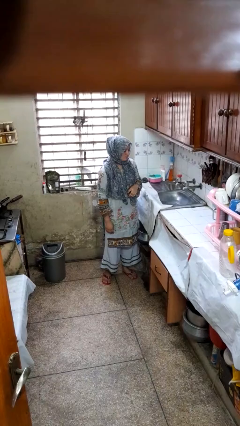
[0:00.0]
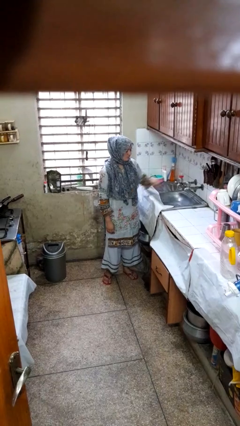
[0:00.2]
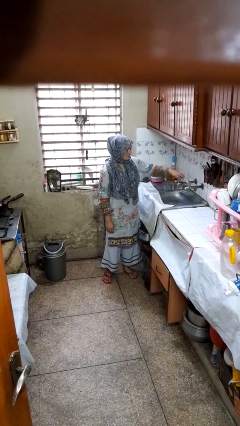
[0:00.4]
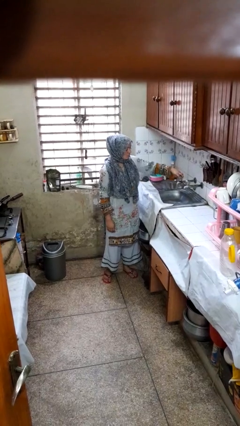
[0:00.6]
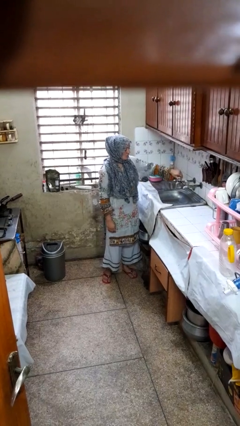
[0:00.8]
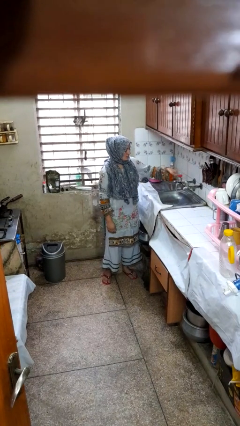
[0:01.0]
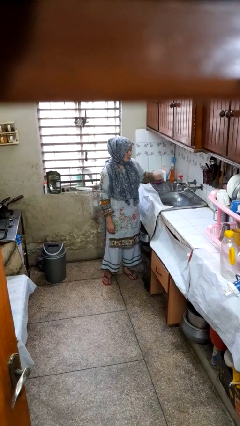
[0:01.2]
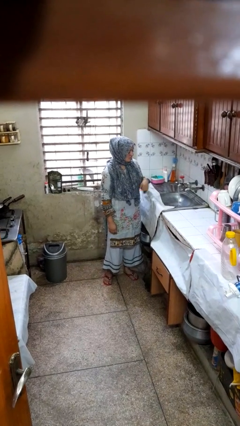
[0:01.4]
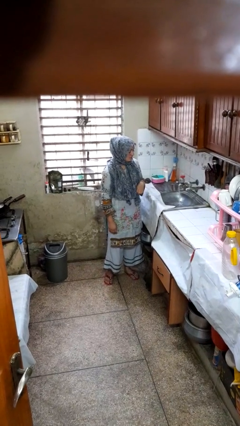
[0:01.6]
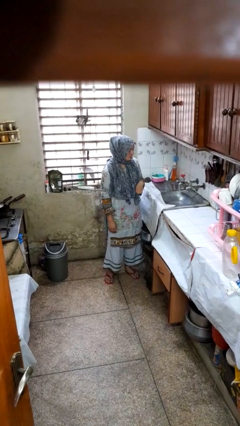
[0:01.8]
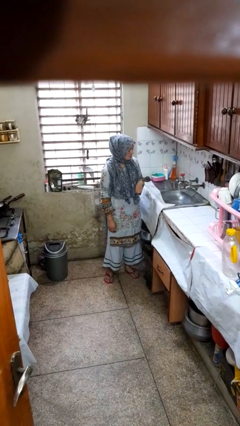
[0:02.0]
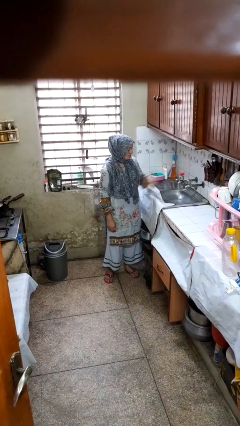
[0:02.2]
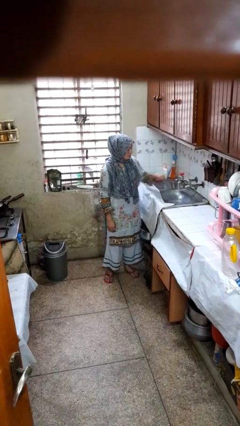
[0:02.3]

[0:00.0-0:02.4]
person turns on faucet

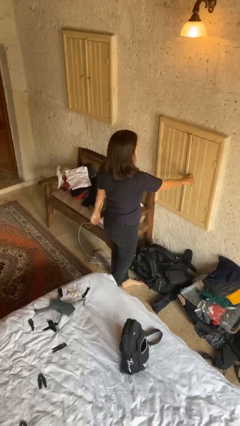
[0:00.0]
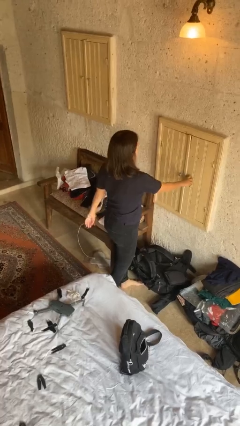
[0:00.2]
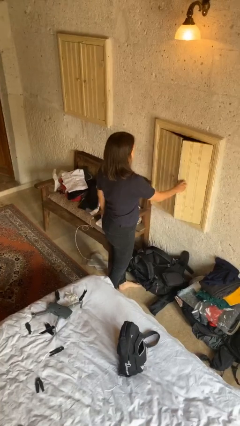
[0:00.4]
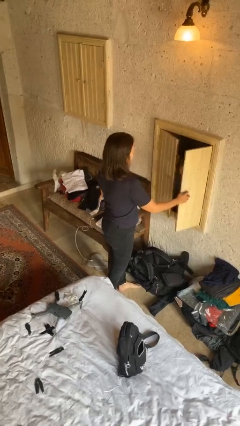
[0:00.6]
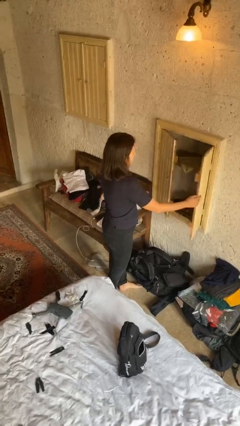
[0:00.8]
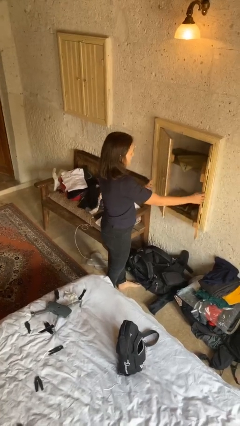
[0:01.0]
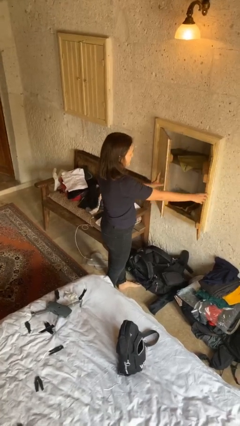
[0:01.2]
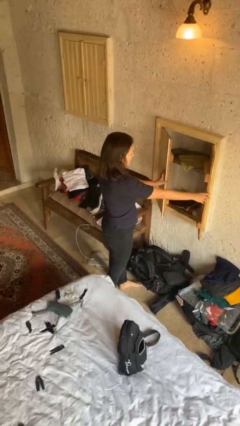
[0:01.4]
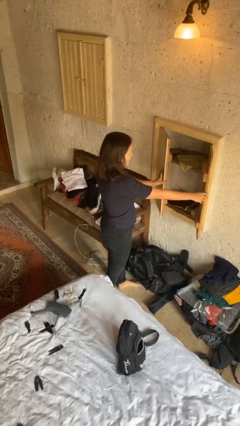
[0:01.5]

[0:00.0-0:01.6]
person opens closet door

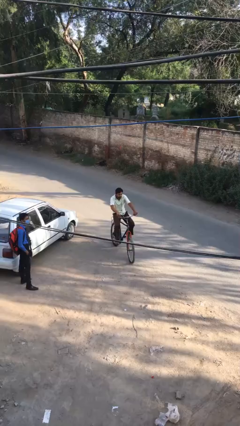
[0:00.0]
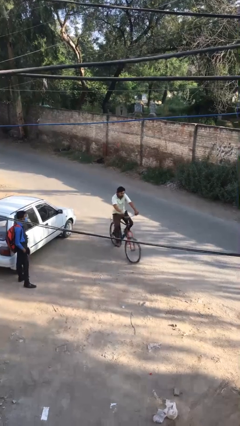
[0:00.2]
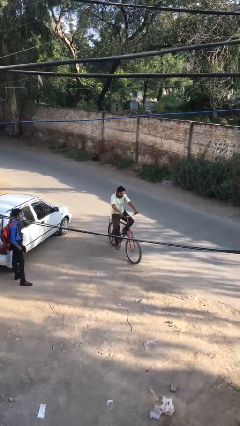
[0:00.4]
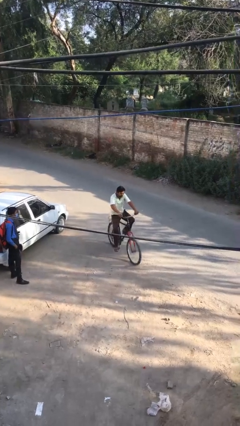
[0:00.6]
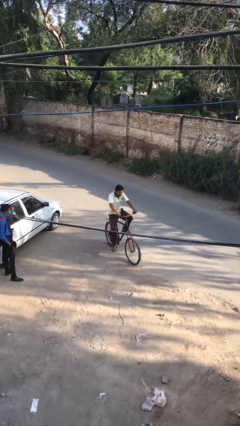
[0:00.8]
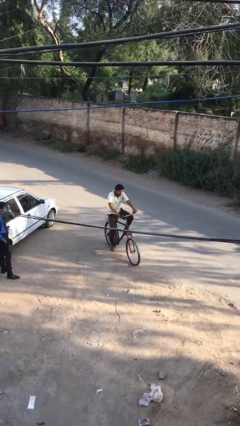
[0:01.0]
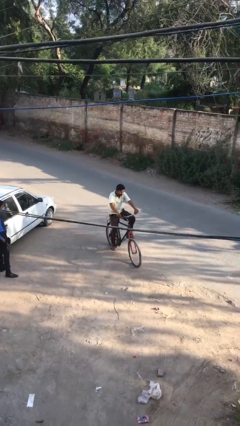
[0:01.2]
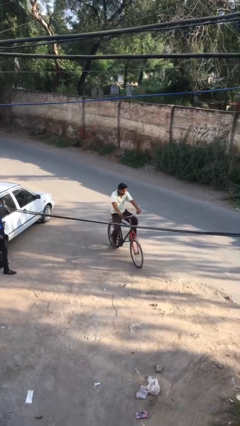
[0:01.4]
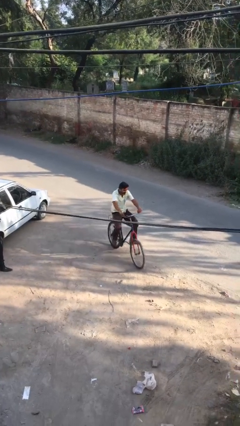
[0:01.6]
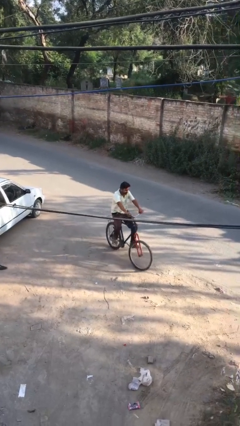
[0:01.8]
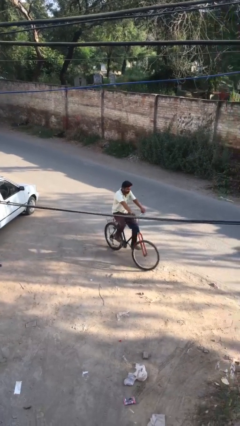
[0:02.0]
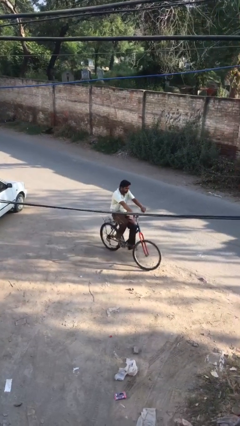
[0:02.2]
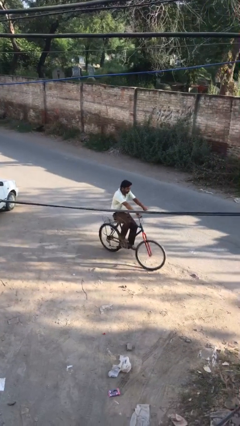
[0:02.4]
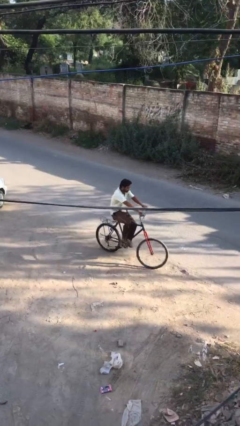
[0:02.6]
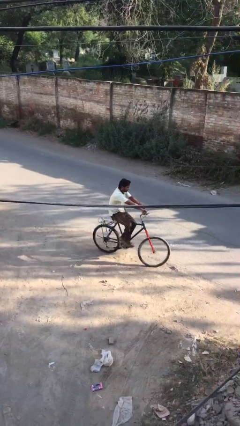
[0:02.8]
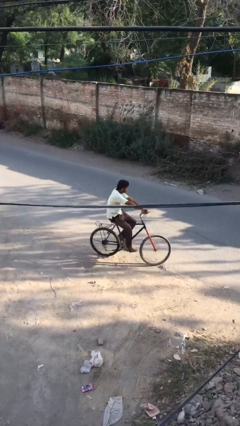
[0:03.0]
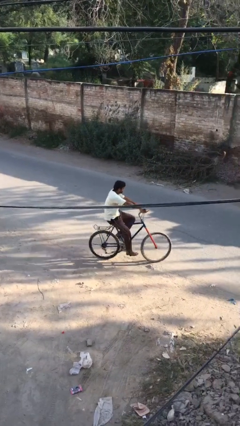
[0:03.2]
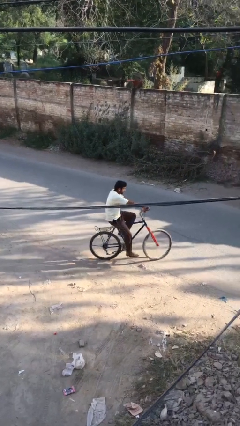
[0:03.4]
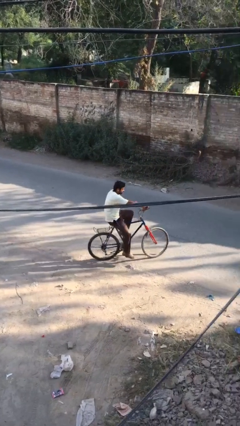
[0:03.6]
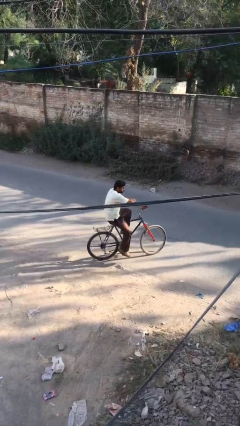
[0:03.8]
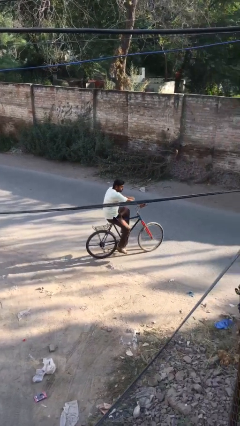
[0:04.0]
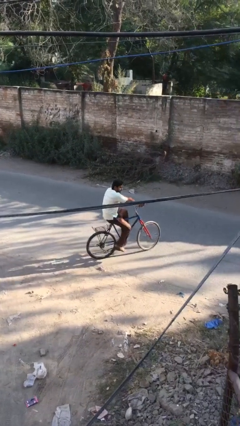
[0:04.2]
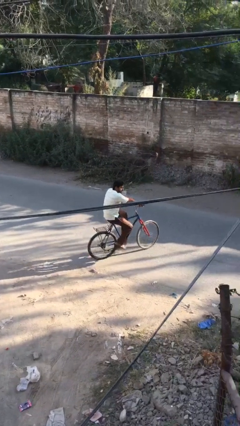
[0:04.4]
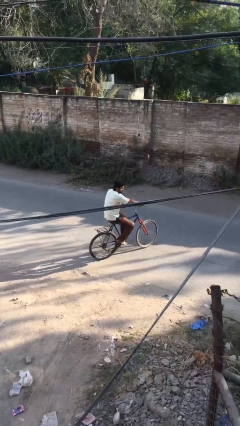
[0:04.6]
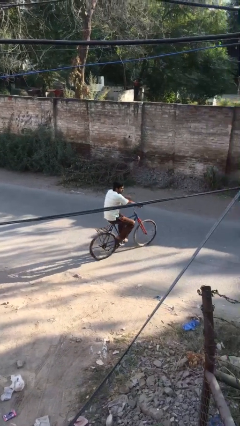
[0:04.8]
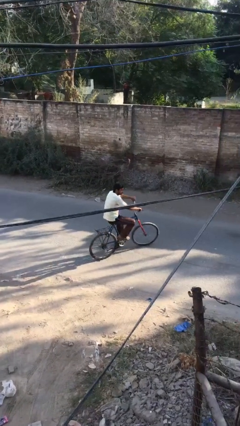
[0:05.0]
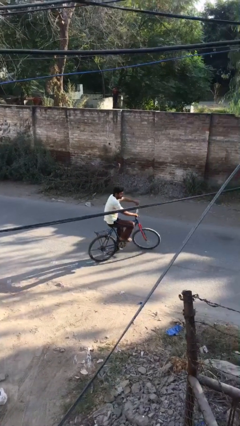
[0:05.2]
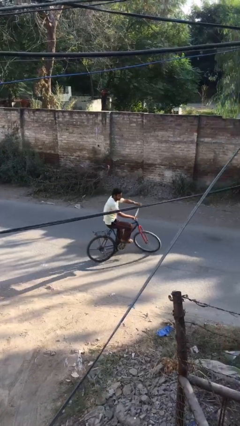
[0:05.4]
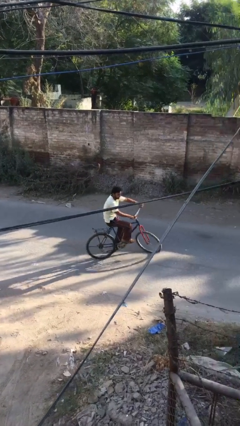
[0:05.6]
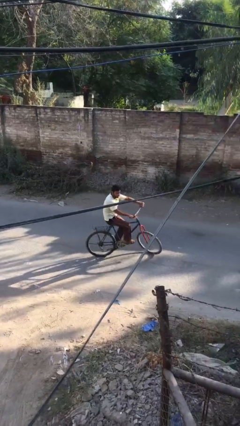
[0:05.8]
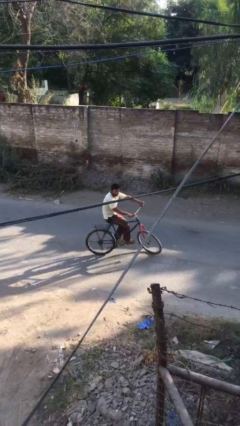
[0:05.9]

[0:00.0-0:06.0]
person rides bicycle

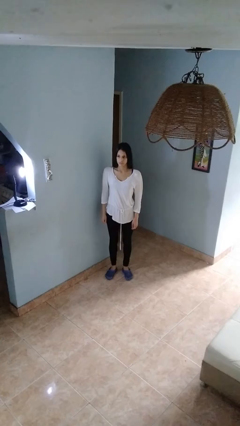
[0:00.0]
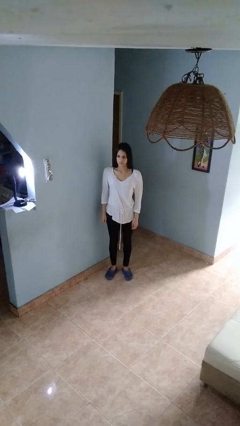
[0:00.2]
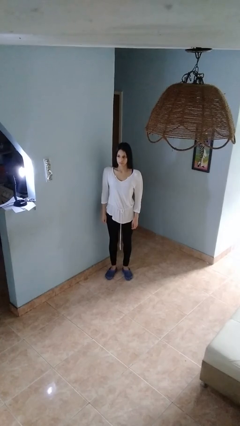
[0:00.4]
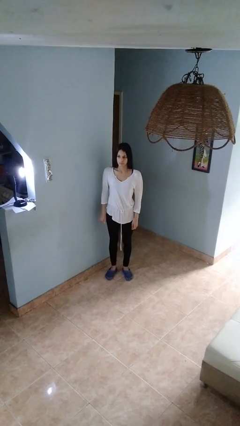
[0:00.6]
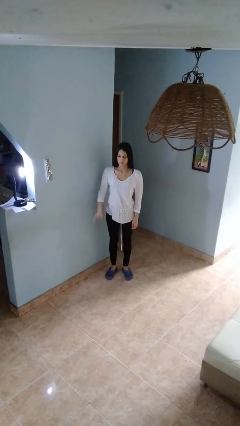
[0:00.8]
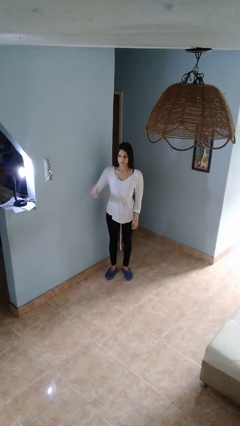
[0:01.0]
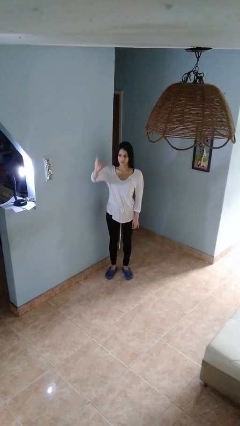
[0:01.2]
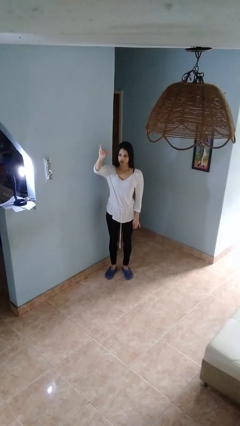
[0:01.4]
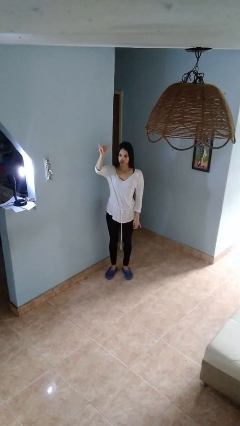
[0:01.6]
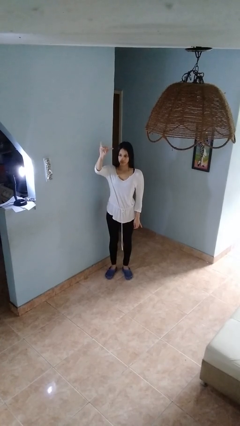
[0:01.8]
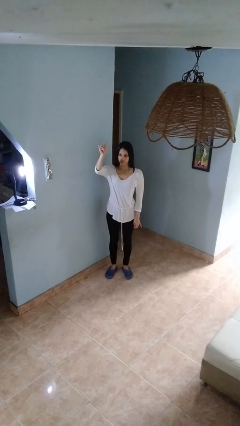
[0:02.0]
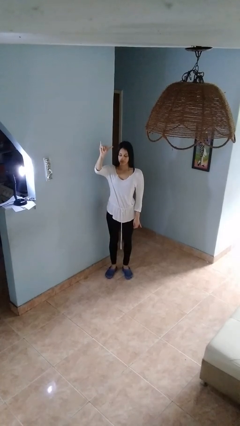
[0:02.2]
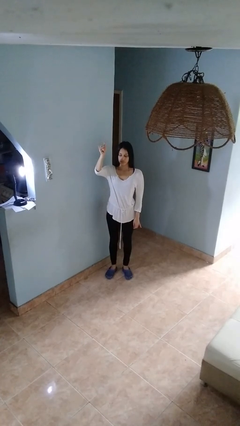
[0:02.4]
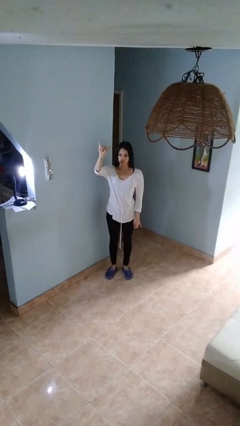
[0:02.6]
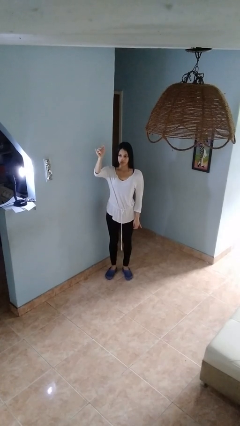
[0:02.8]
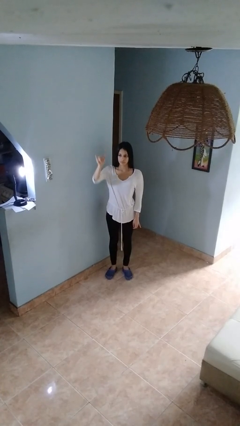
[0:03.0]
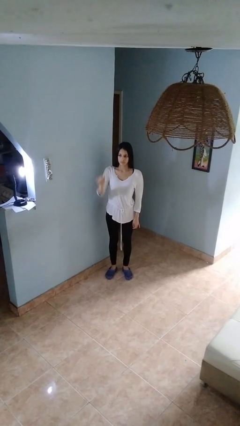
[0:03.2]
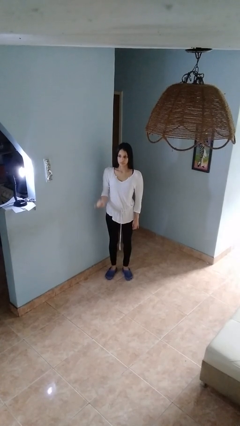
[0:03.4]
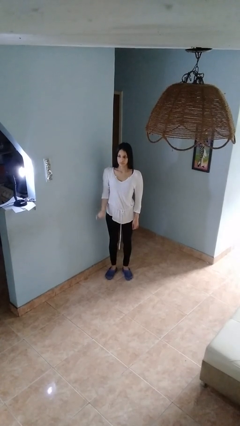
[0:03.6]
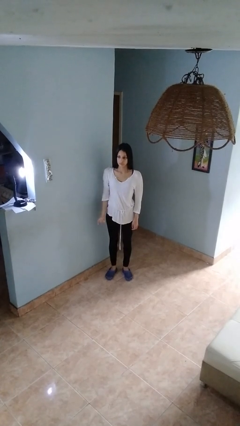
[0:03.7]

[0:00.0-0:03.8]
person gestures hang loose

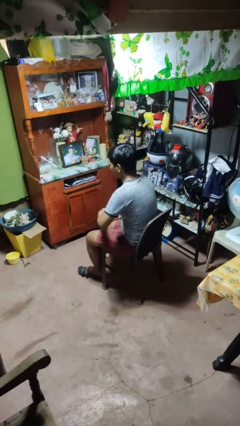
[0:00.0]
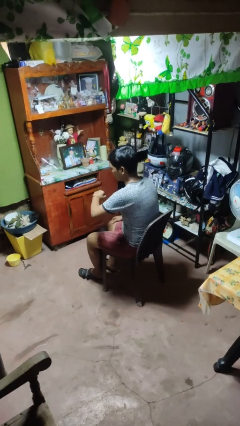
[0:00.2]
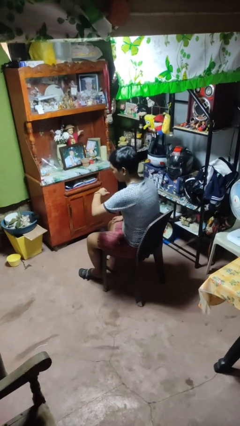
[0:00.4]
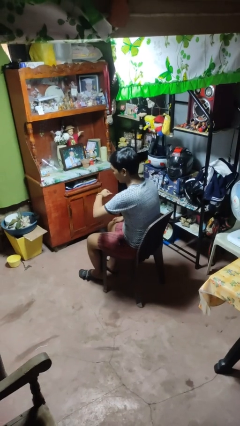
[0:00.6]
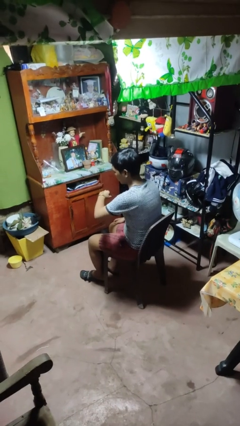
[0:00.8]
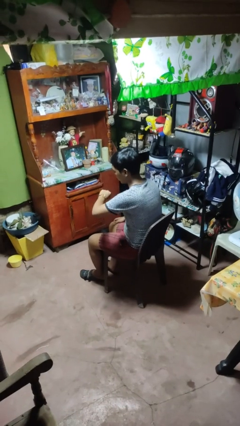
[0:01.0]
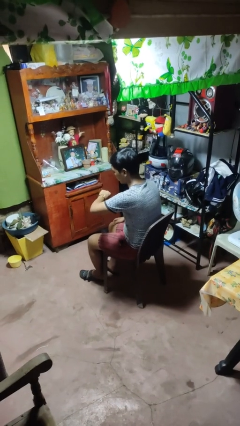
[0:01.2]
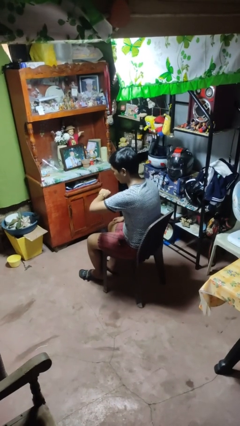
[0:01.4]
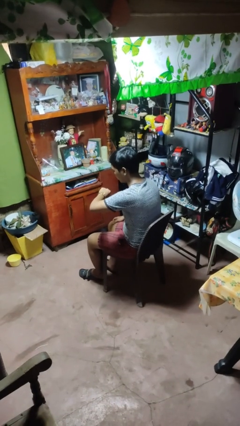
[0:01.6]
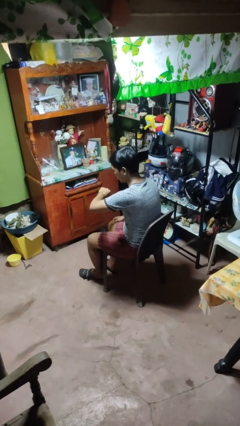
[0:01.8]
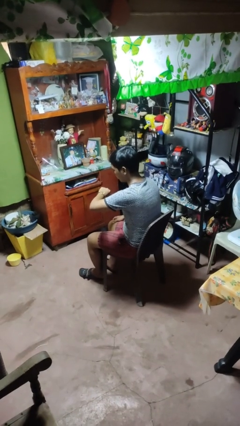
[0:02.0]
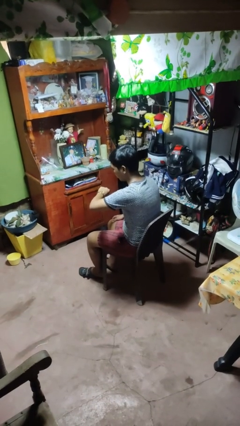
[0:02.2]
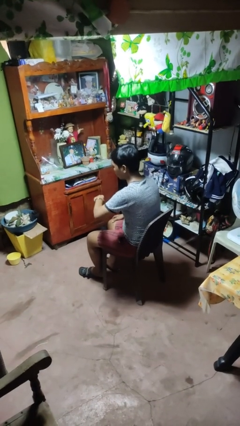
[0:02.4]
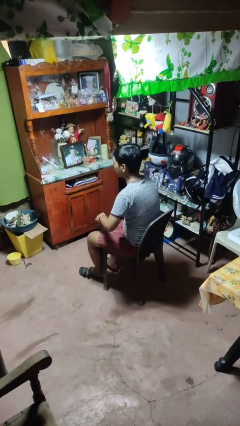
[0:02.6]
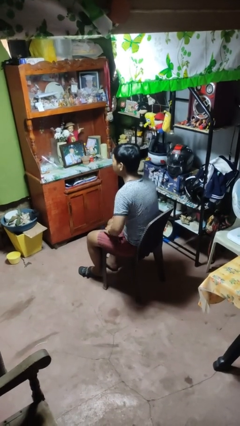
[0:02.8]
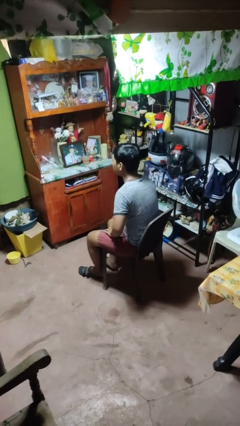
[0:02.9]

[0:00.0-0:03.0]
person looks at wristwatch

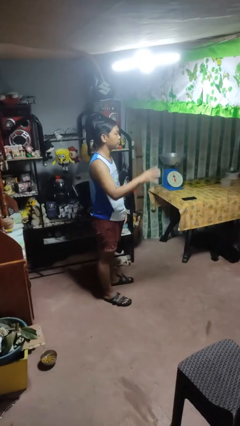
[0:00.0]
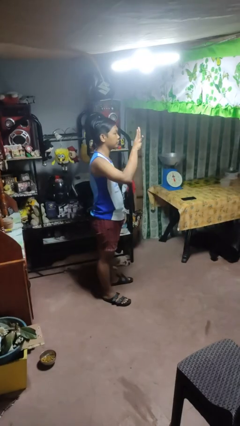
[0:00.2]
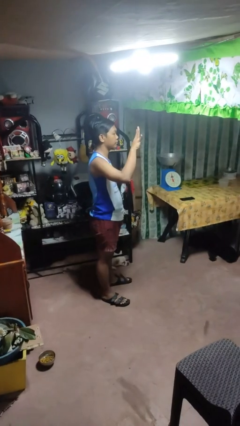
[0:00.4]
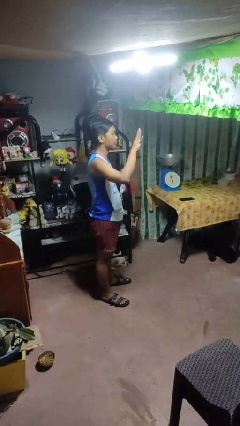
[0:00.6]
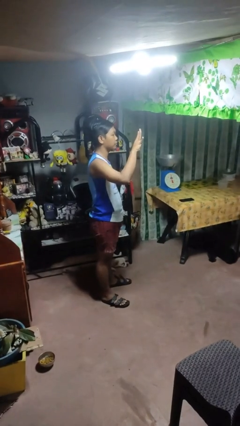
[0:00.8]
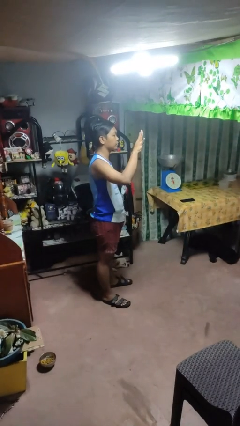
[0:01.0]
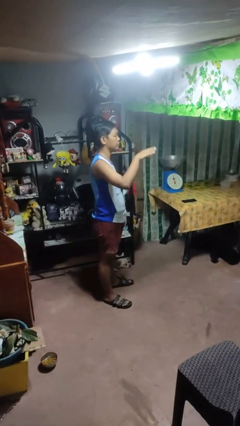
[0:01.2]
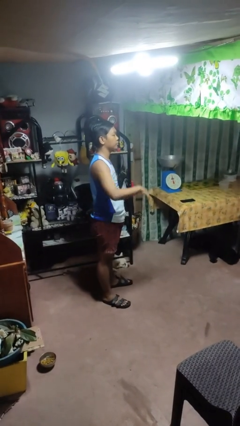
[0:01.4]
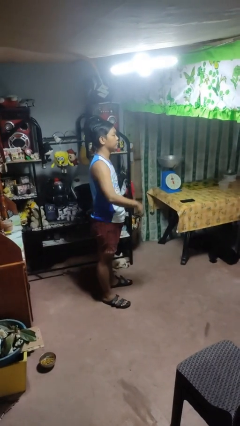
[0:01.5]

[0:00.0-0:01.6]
person gestures number four
